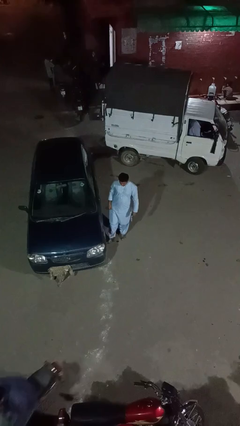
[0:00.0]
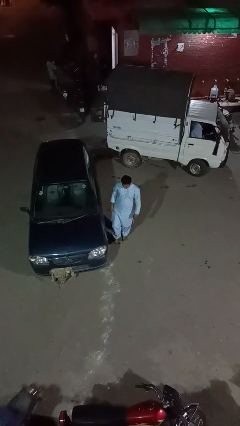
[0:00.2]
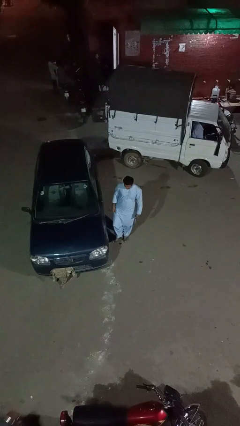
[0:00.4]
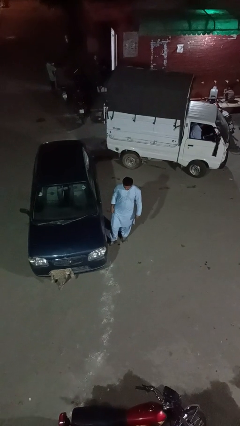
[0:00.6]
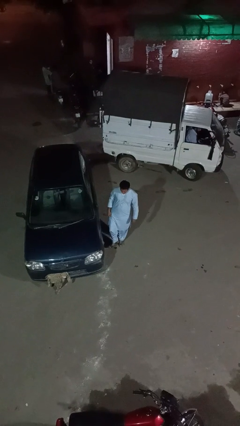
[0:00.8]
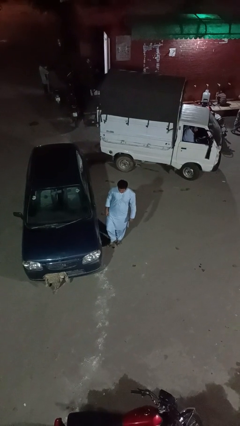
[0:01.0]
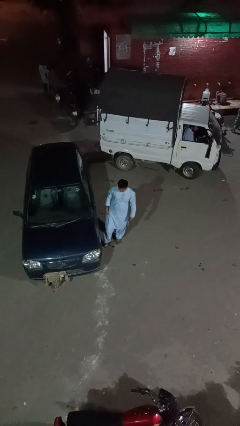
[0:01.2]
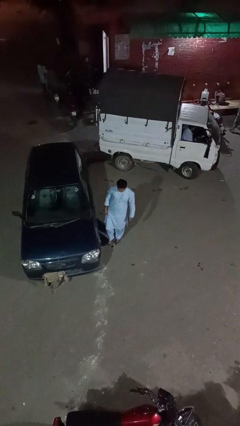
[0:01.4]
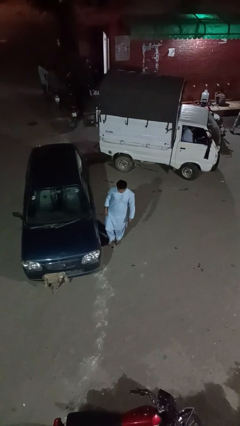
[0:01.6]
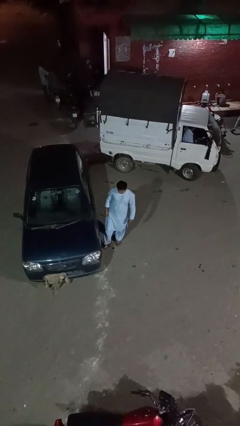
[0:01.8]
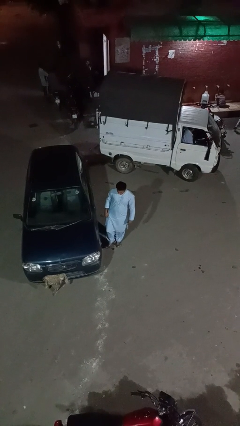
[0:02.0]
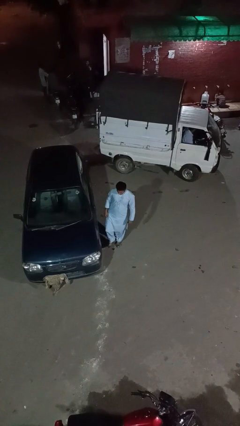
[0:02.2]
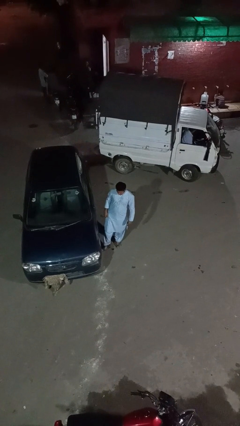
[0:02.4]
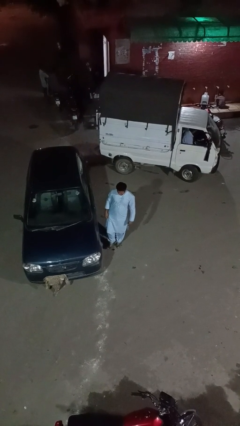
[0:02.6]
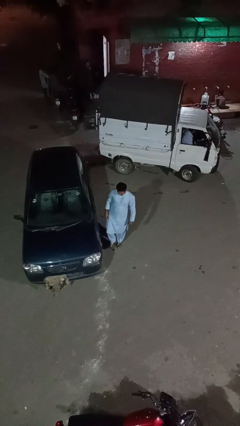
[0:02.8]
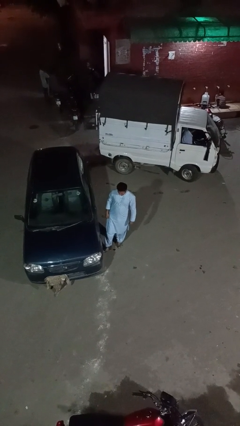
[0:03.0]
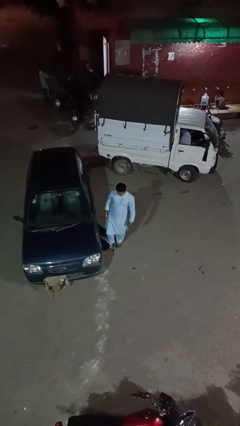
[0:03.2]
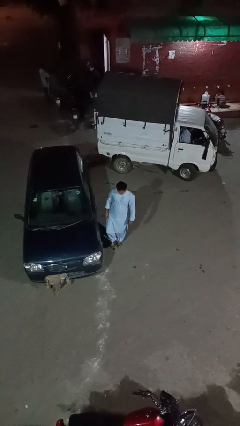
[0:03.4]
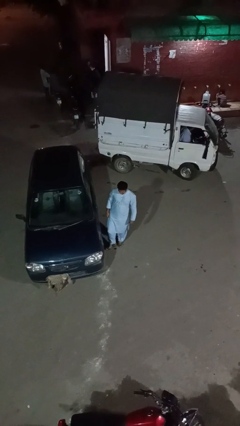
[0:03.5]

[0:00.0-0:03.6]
person kicks car tires

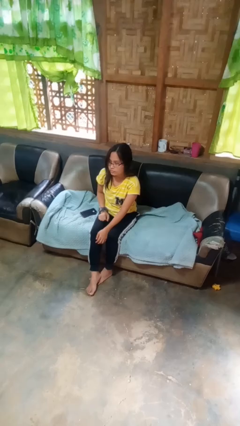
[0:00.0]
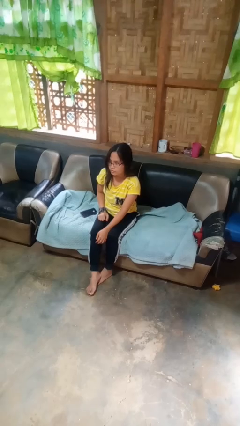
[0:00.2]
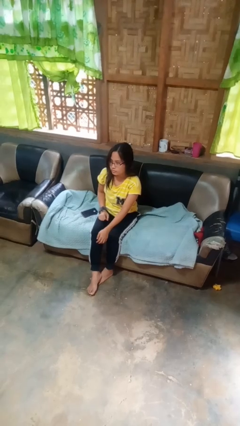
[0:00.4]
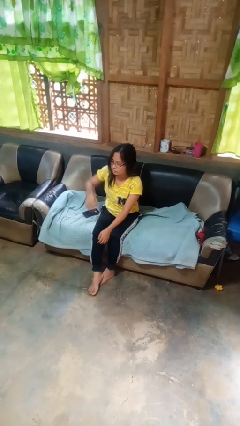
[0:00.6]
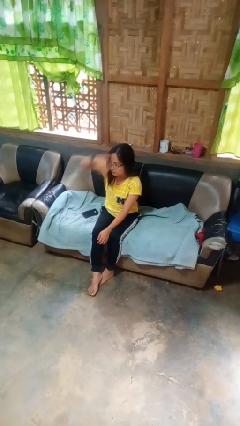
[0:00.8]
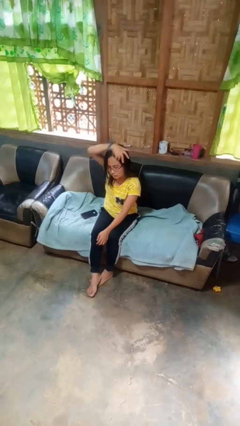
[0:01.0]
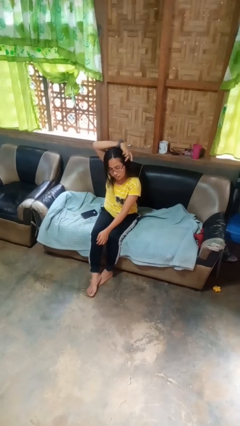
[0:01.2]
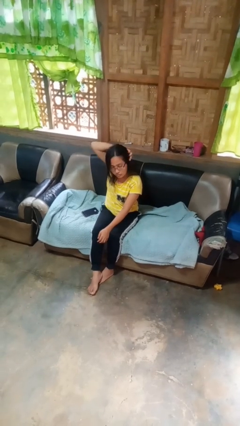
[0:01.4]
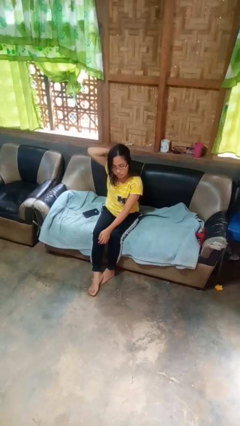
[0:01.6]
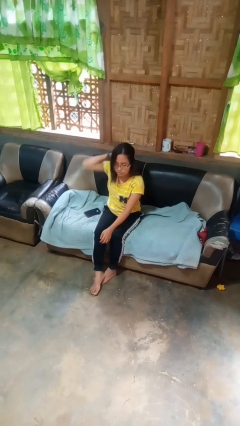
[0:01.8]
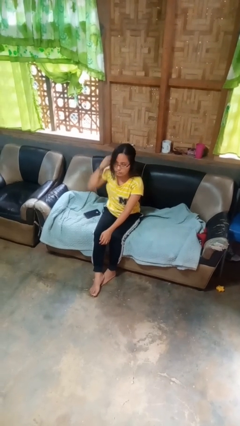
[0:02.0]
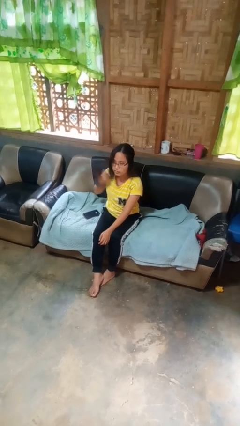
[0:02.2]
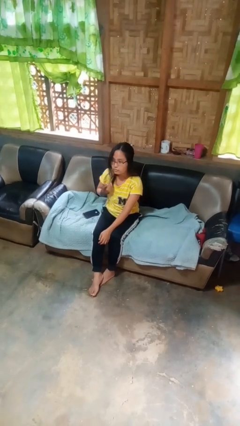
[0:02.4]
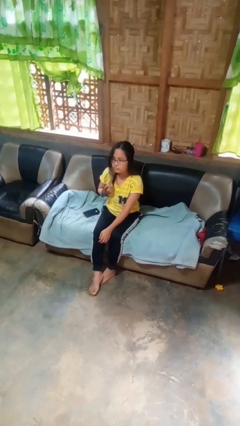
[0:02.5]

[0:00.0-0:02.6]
person strokes hair

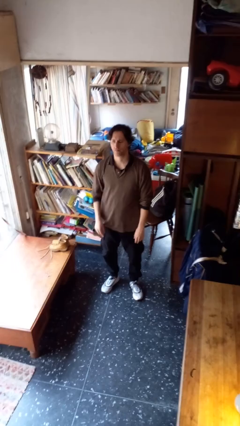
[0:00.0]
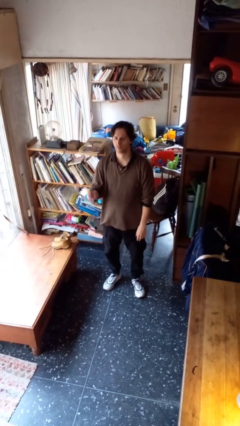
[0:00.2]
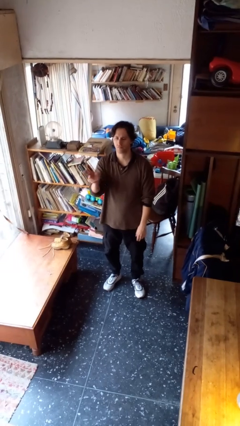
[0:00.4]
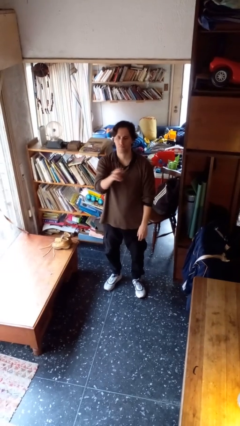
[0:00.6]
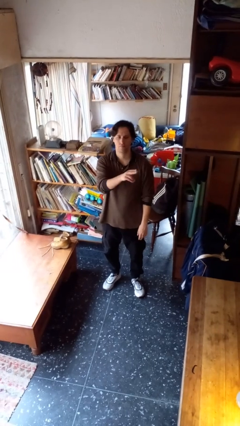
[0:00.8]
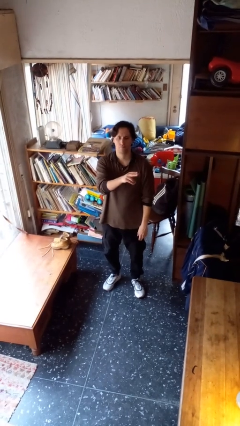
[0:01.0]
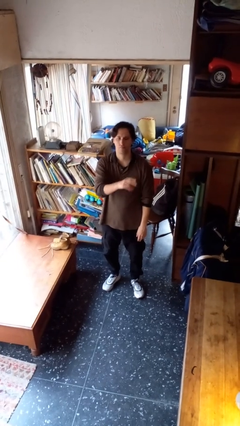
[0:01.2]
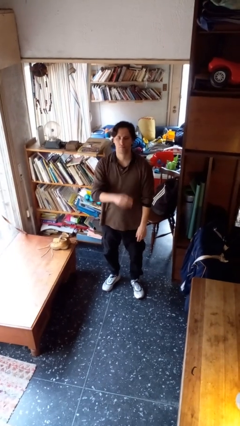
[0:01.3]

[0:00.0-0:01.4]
person gestures swipe left

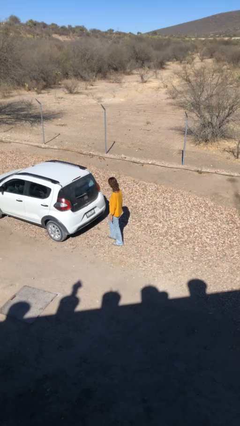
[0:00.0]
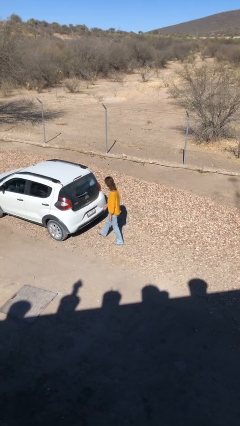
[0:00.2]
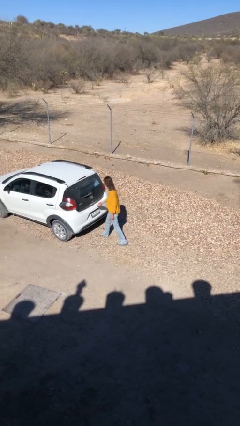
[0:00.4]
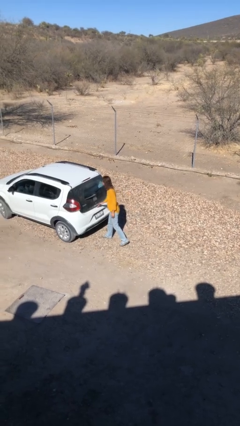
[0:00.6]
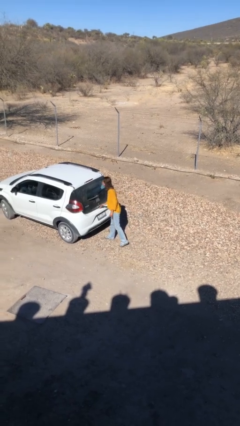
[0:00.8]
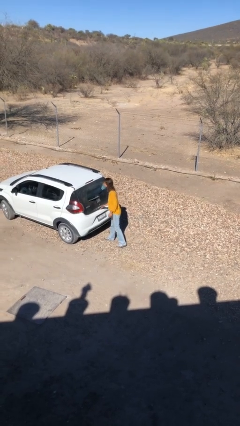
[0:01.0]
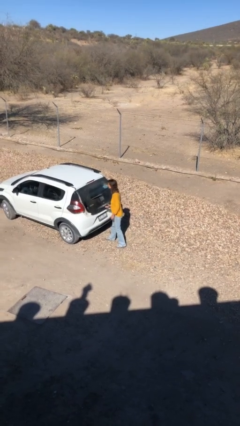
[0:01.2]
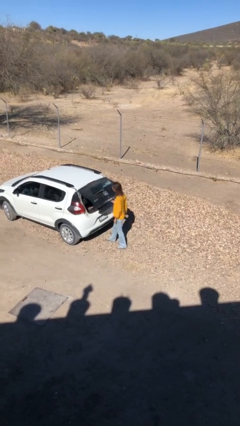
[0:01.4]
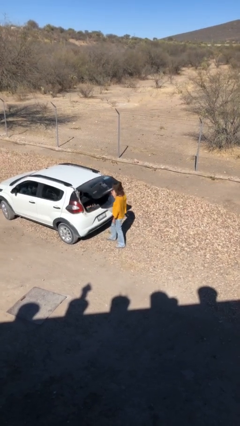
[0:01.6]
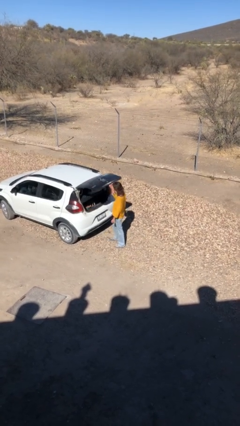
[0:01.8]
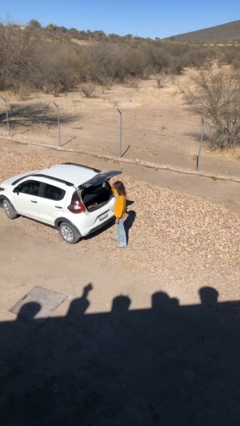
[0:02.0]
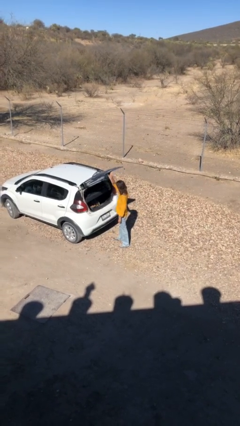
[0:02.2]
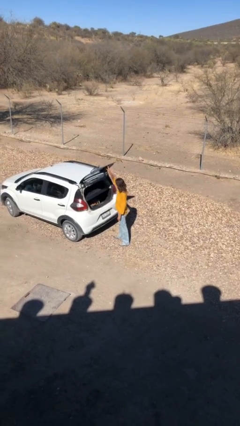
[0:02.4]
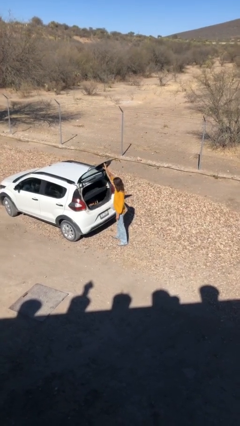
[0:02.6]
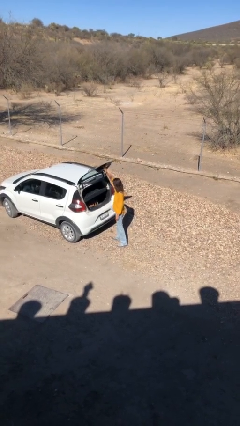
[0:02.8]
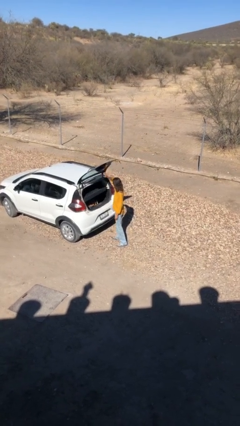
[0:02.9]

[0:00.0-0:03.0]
person opens car trunk

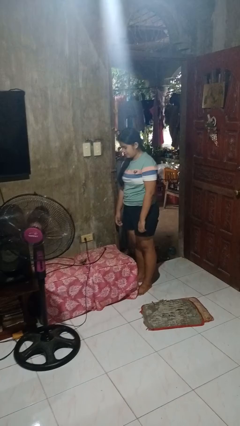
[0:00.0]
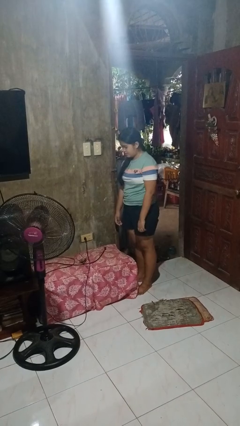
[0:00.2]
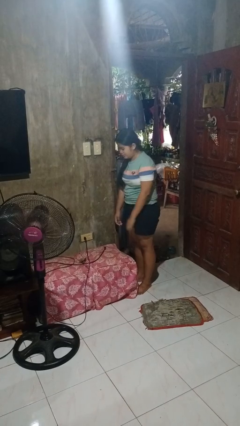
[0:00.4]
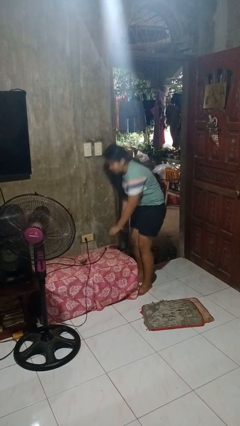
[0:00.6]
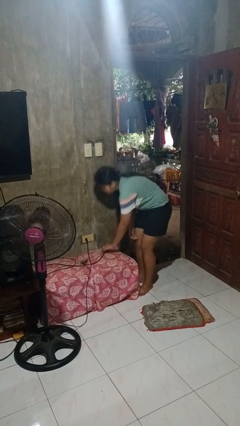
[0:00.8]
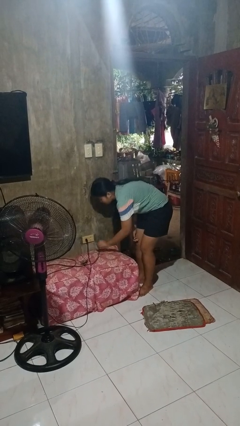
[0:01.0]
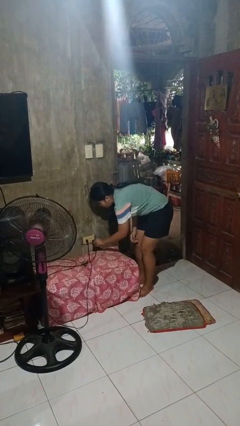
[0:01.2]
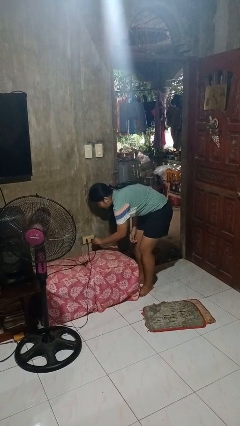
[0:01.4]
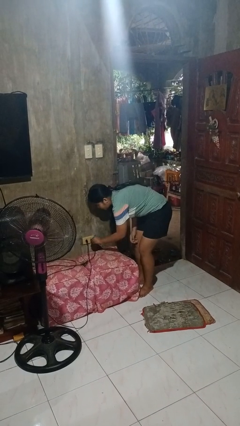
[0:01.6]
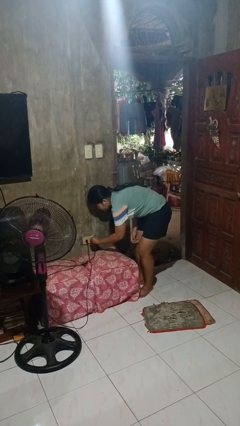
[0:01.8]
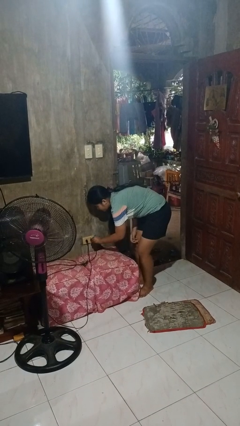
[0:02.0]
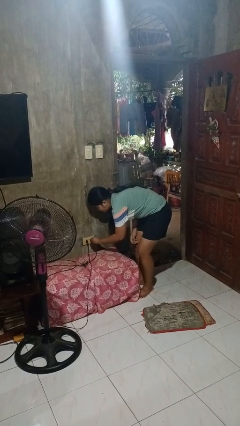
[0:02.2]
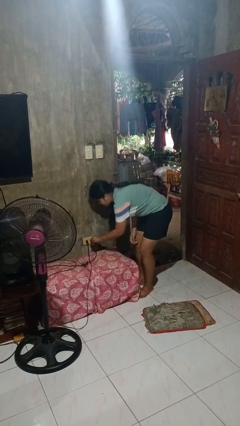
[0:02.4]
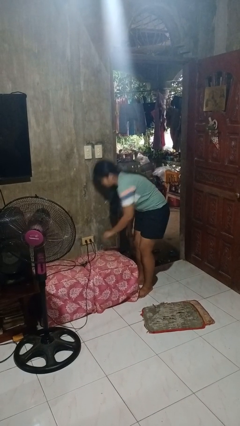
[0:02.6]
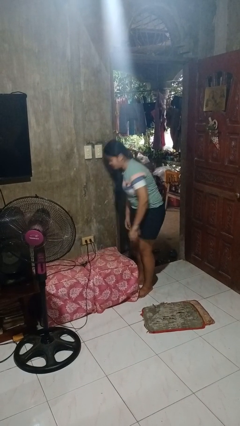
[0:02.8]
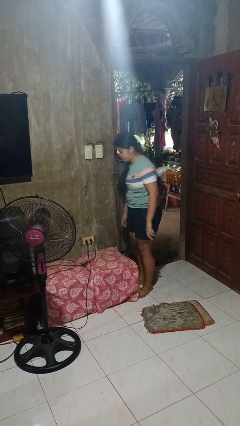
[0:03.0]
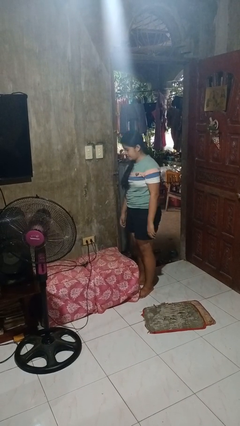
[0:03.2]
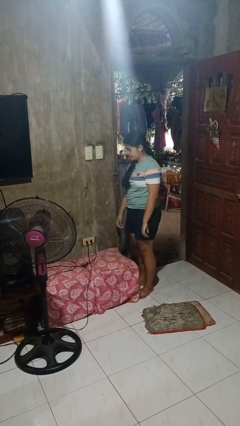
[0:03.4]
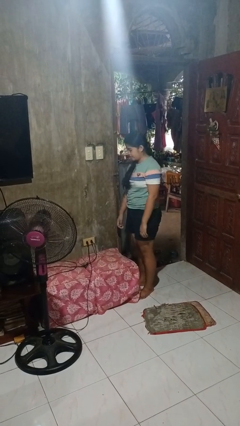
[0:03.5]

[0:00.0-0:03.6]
person plugs into electrical socket

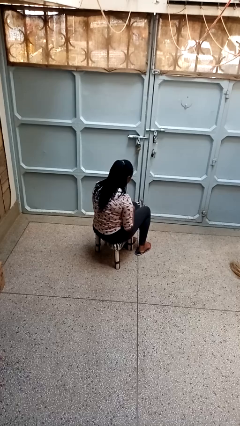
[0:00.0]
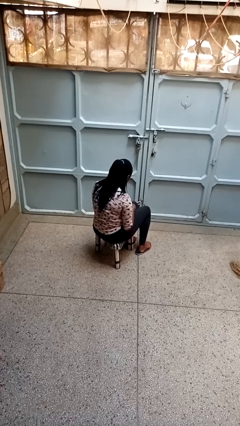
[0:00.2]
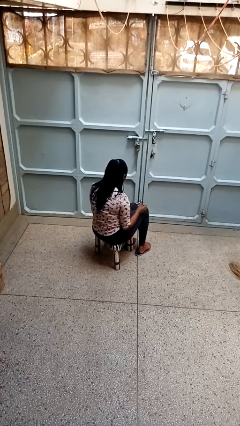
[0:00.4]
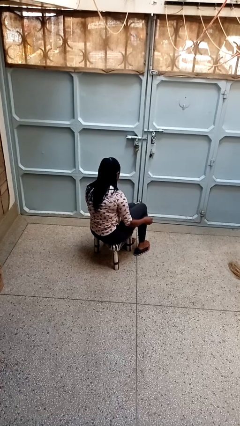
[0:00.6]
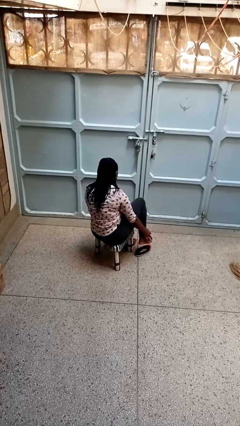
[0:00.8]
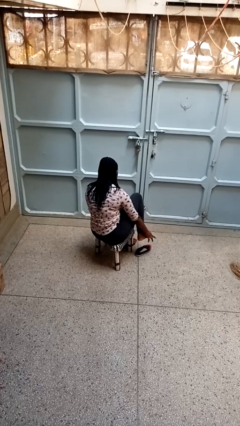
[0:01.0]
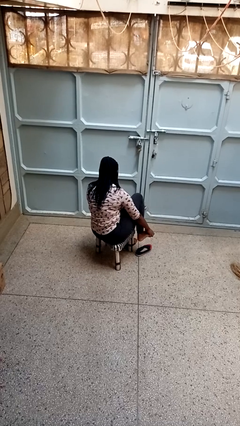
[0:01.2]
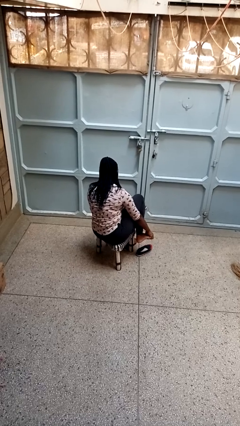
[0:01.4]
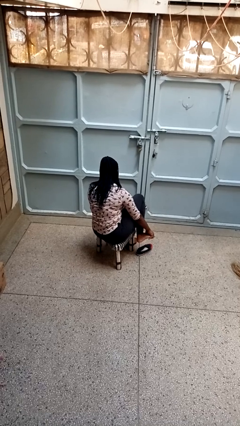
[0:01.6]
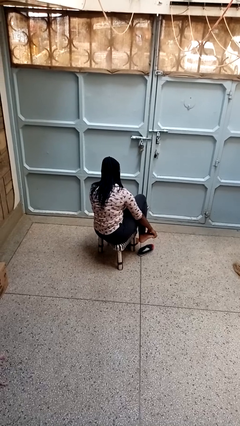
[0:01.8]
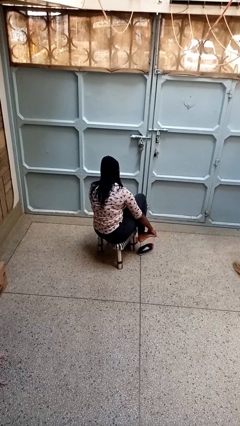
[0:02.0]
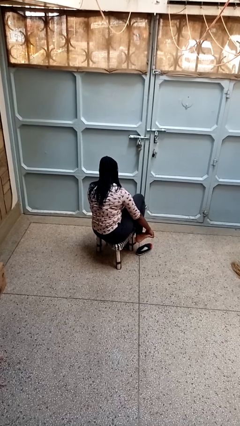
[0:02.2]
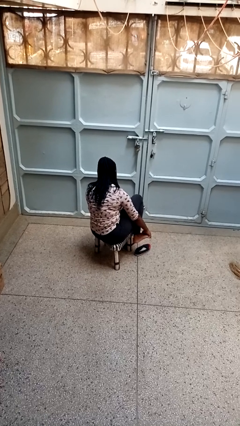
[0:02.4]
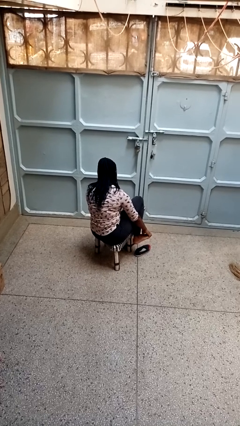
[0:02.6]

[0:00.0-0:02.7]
person rubs foot

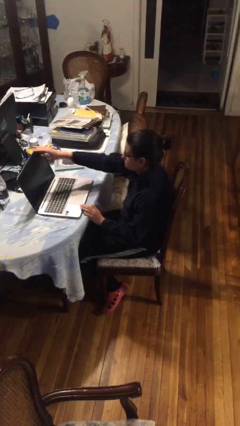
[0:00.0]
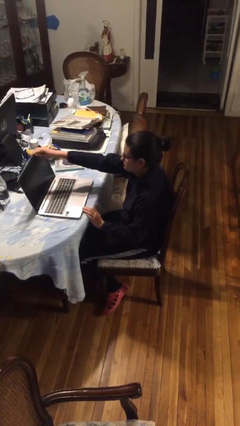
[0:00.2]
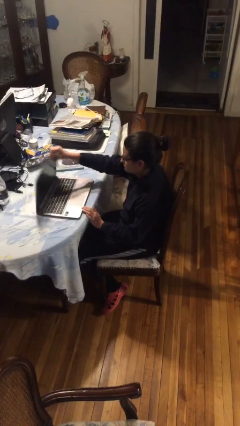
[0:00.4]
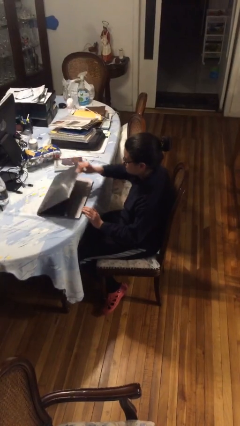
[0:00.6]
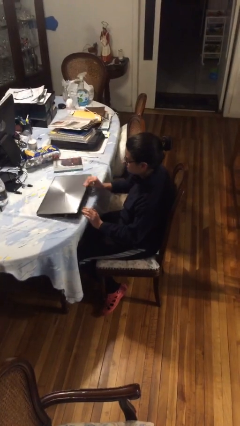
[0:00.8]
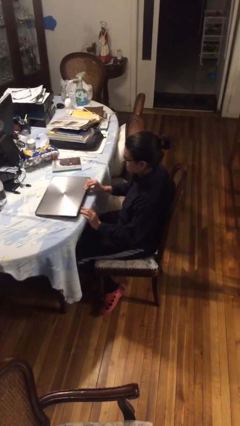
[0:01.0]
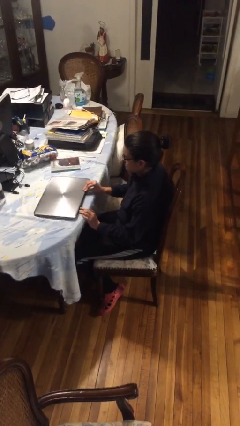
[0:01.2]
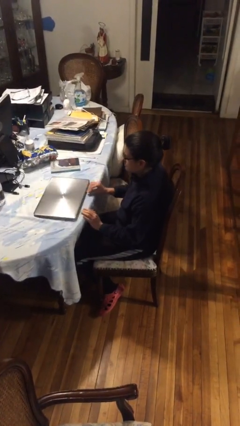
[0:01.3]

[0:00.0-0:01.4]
person closes laptop
